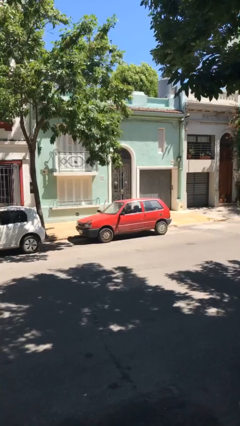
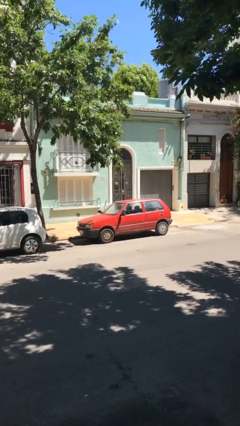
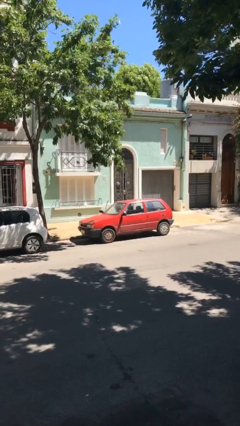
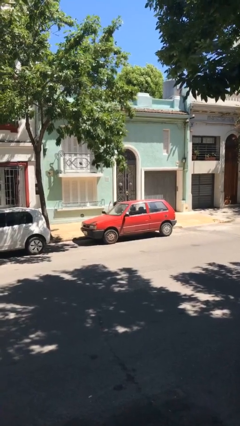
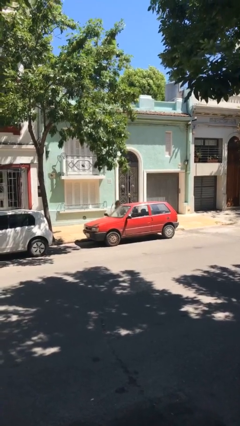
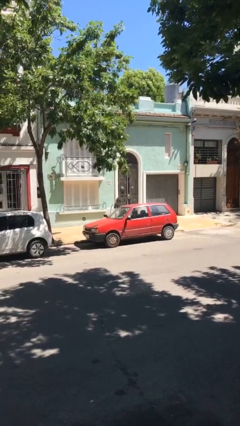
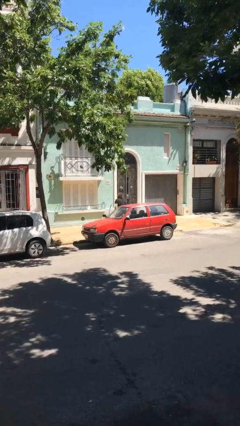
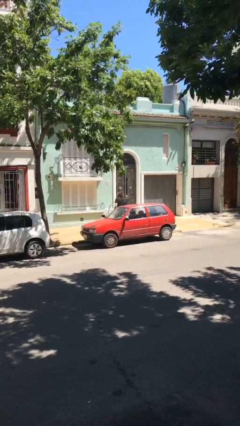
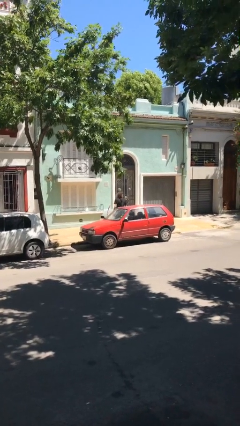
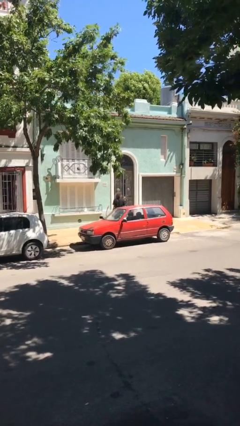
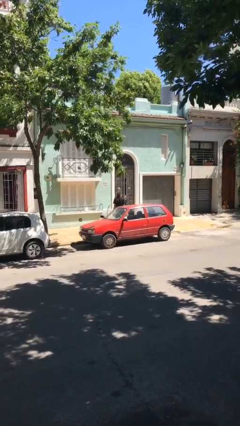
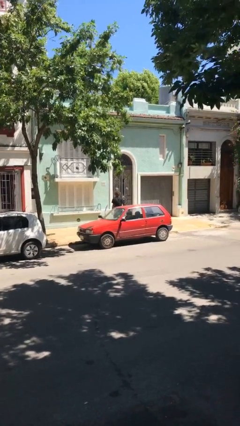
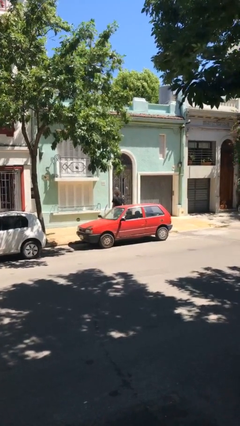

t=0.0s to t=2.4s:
person exits car

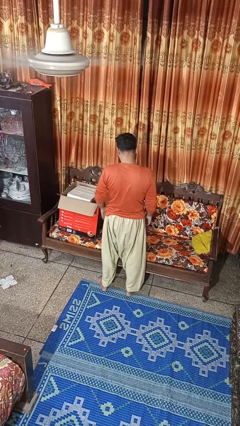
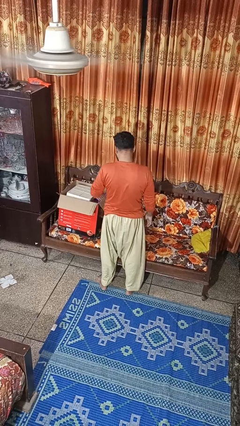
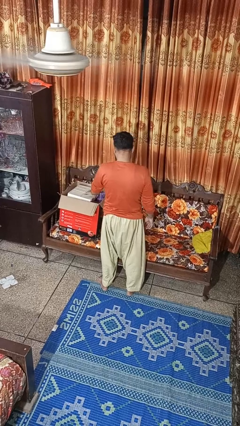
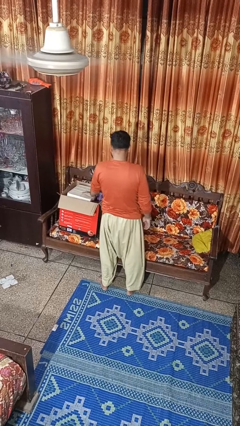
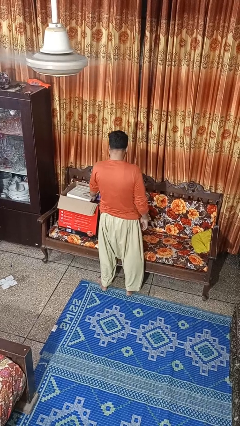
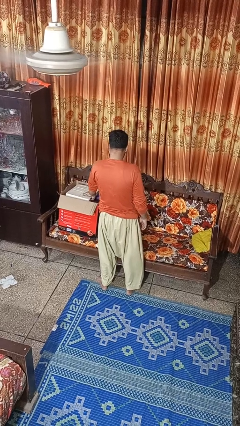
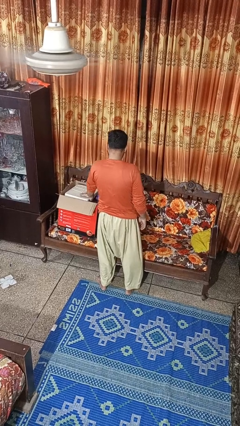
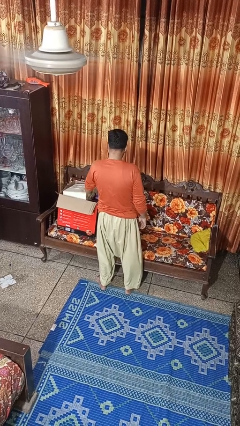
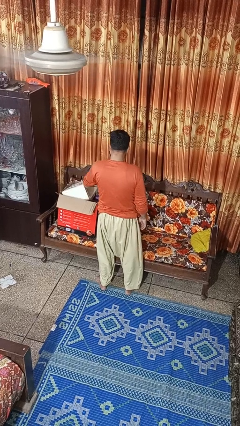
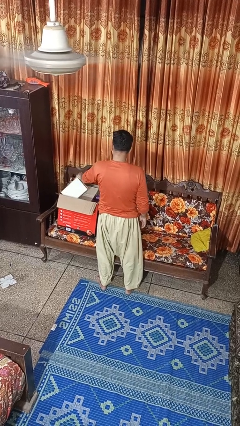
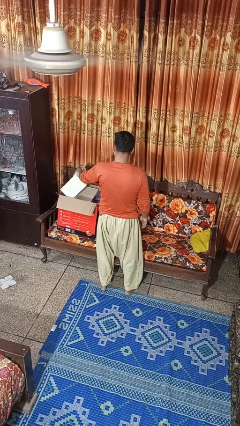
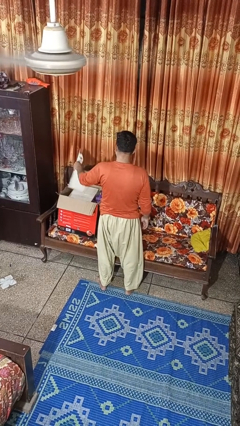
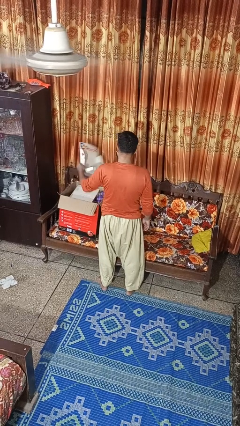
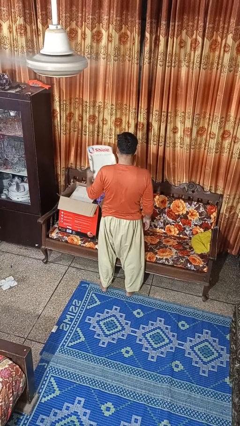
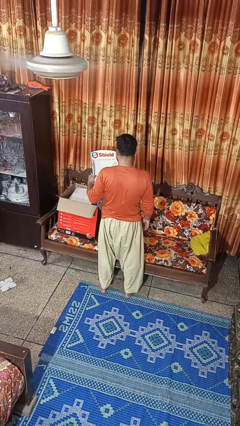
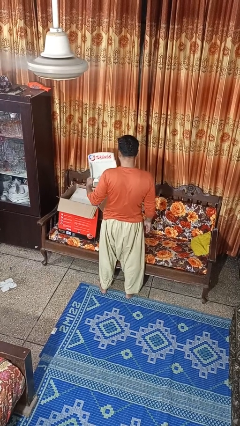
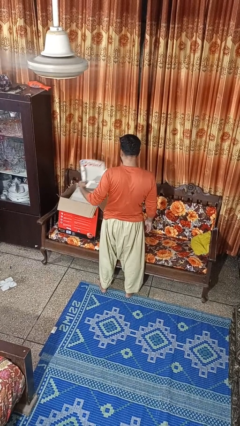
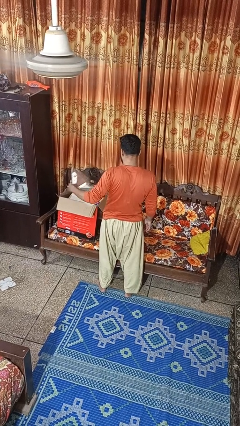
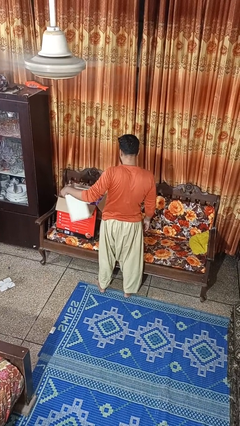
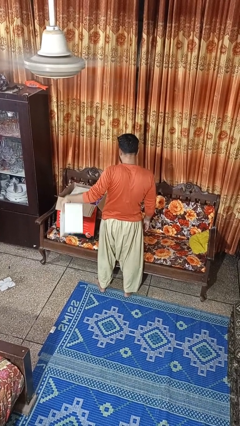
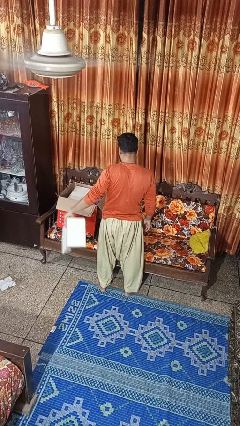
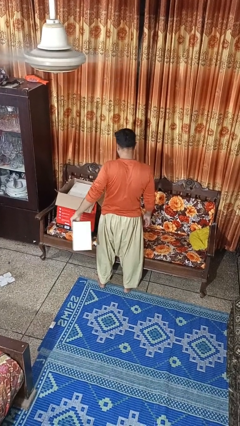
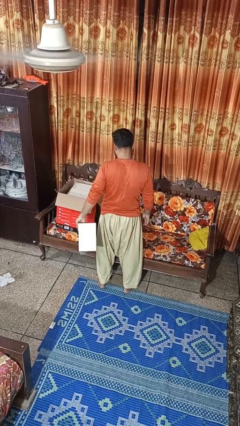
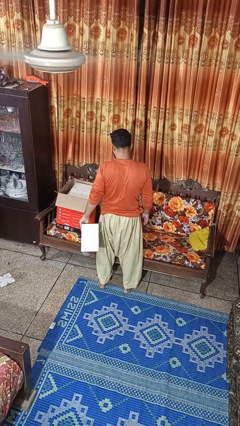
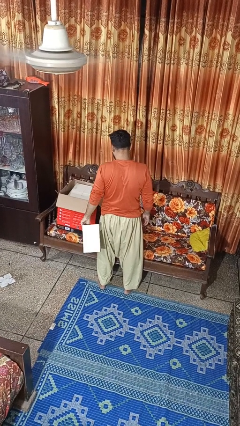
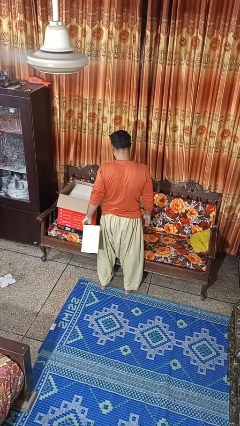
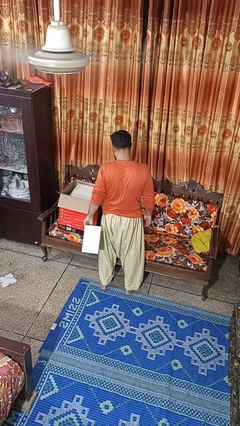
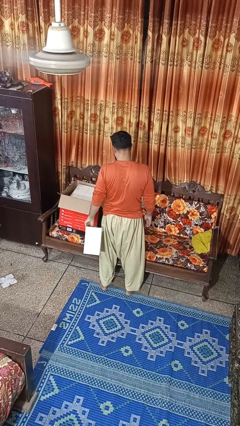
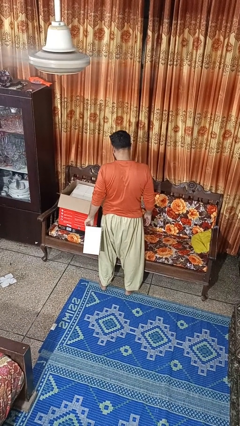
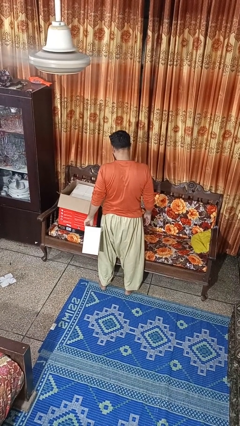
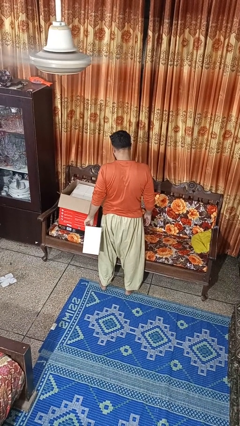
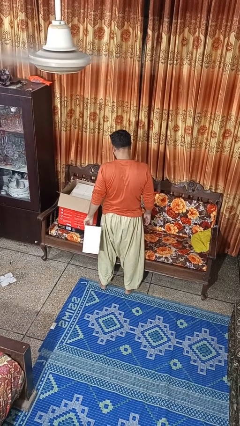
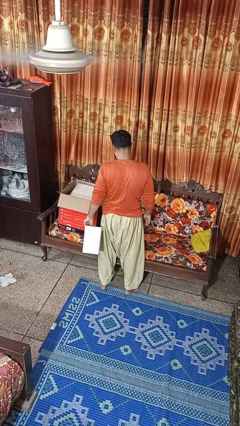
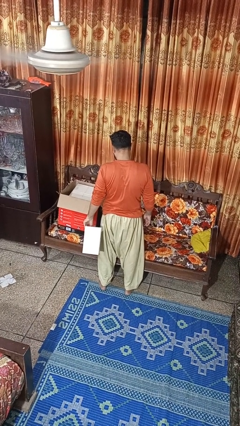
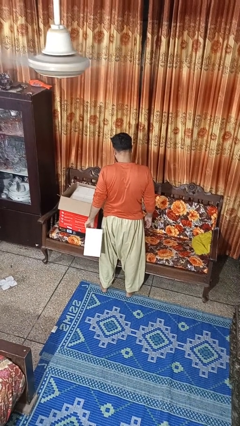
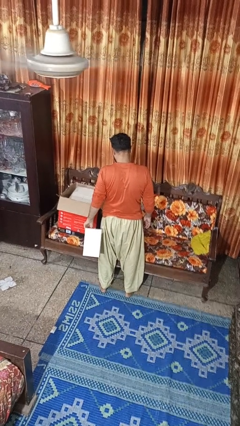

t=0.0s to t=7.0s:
person takes object from box

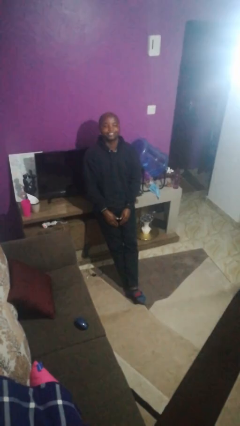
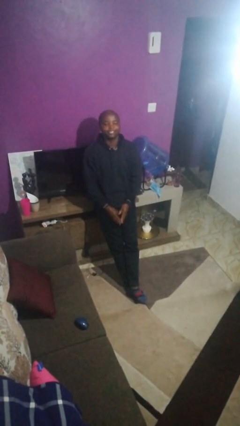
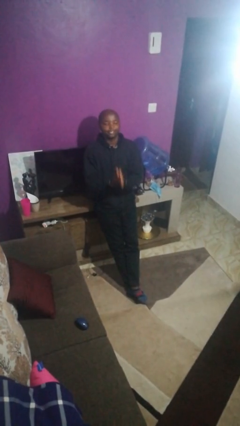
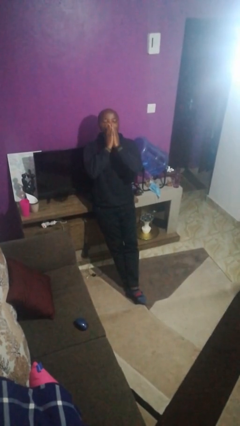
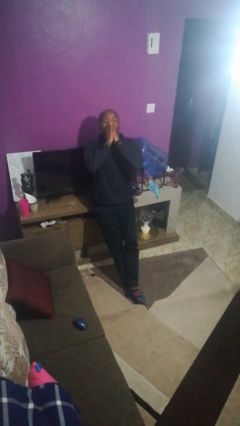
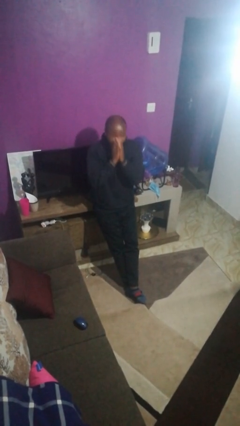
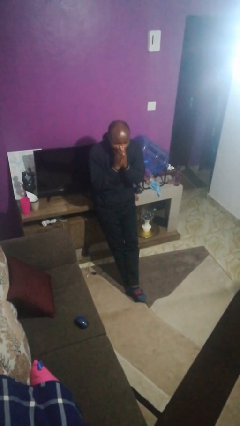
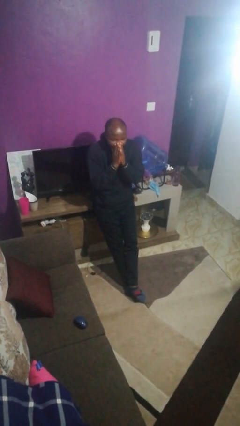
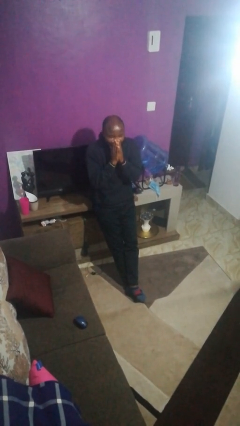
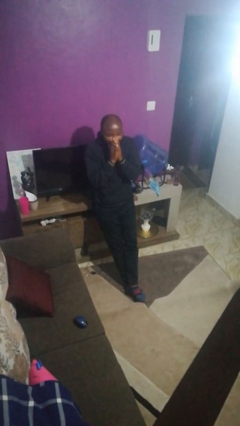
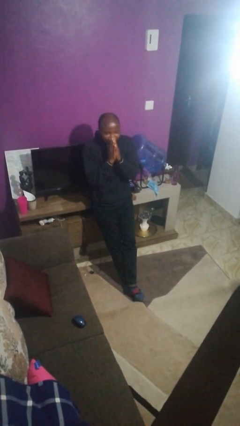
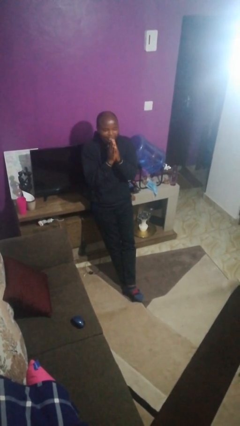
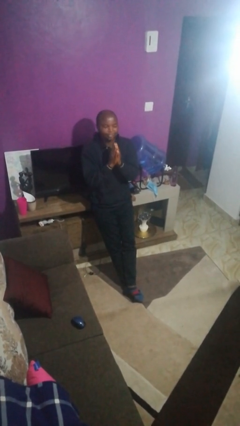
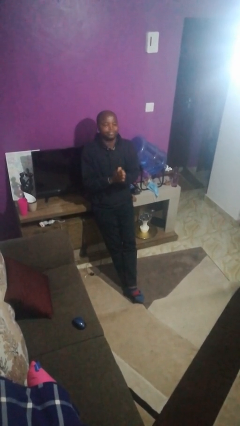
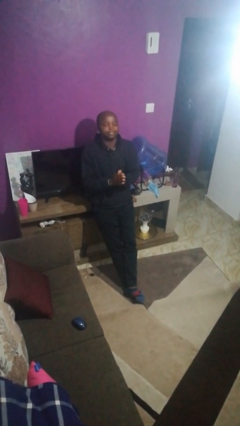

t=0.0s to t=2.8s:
person sneezes into hand

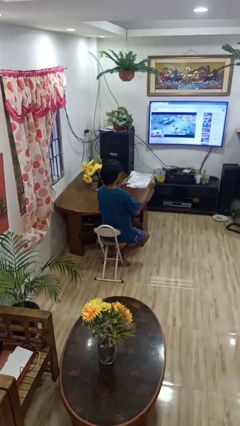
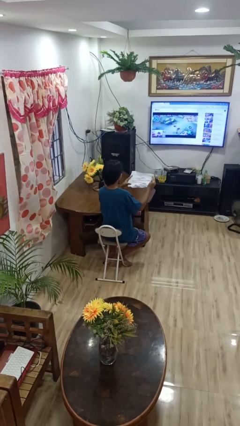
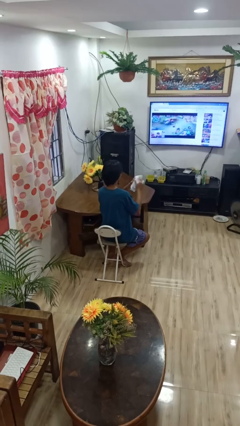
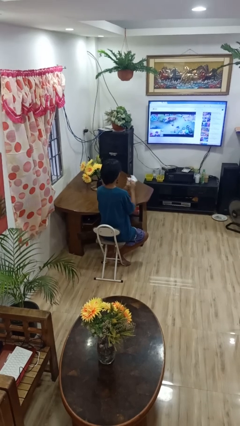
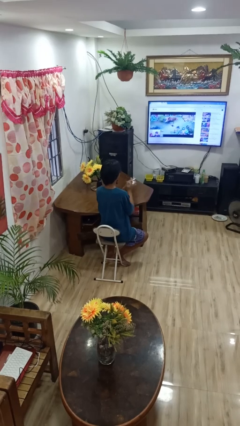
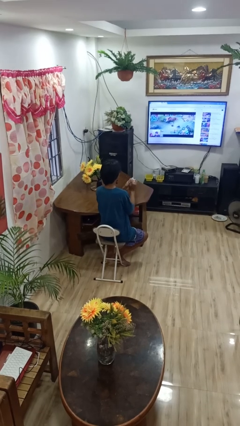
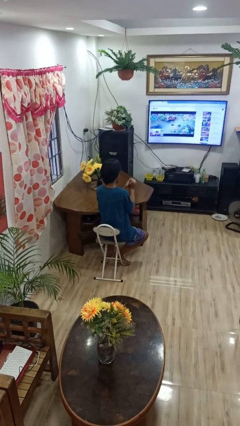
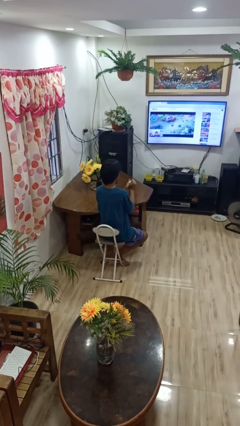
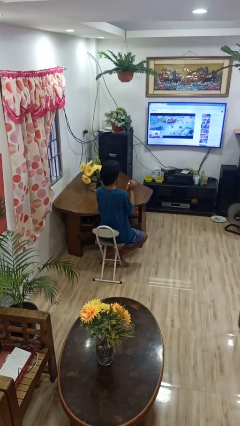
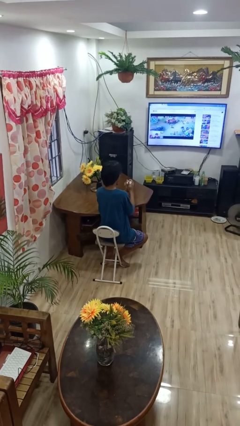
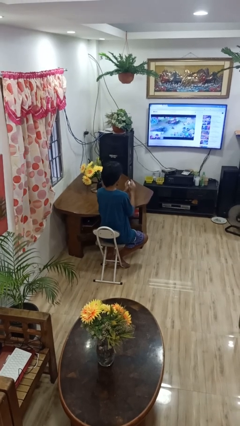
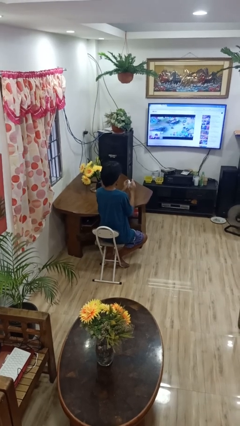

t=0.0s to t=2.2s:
person crumples paper

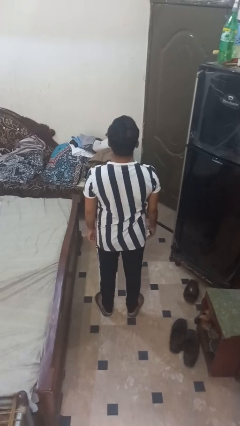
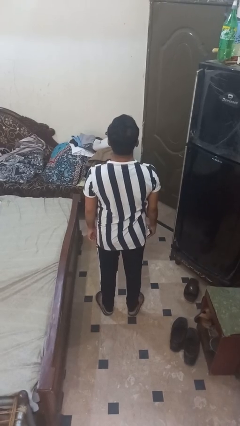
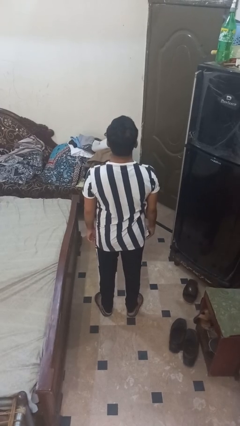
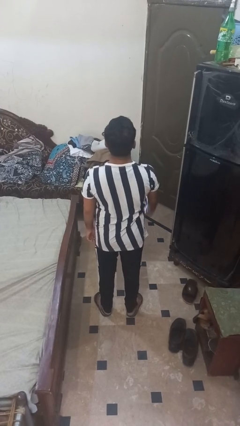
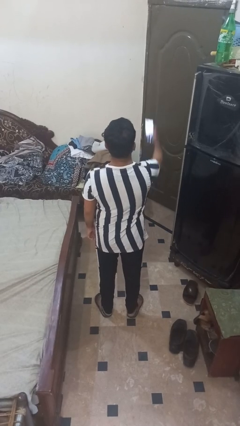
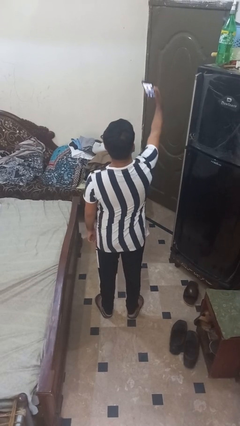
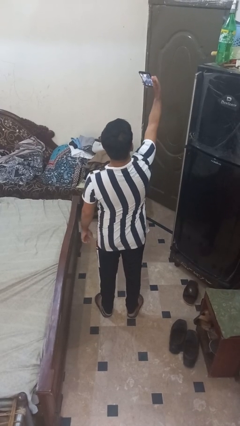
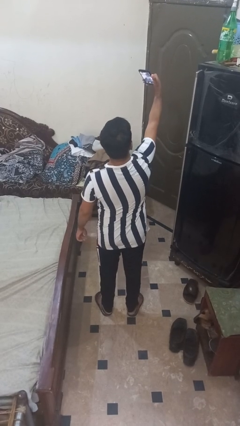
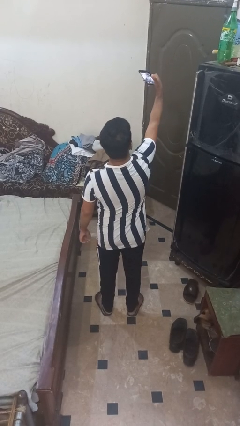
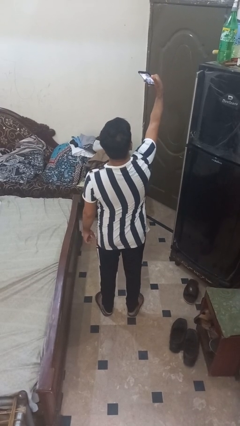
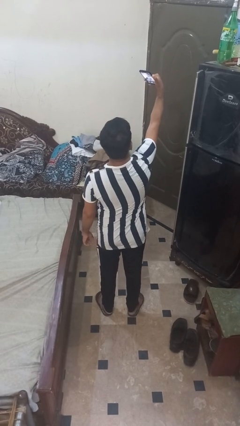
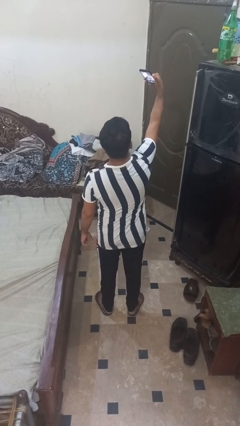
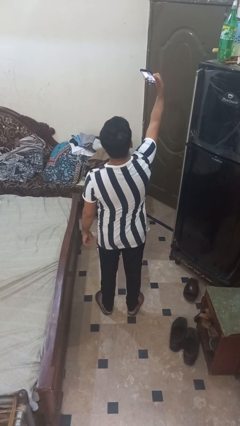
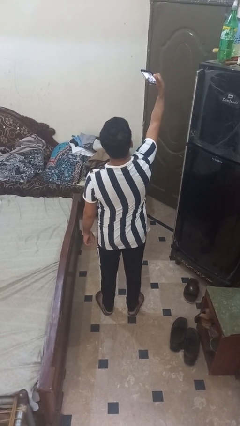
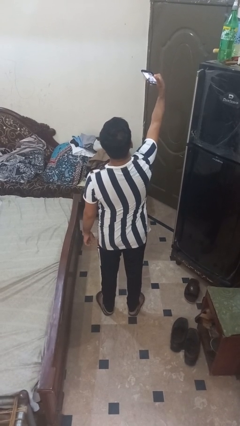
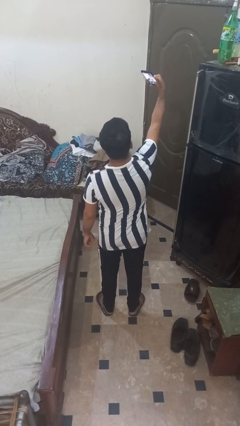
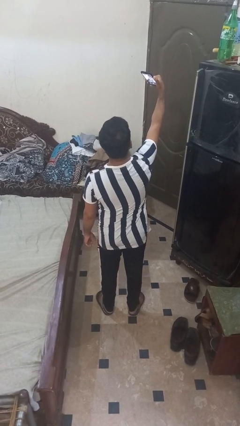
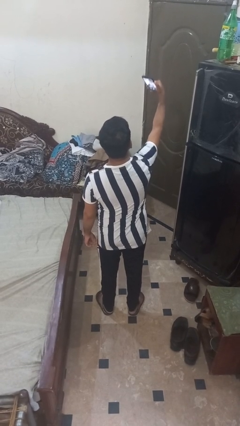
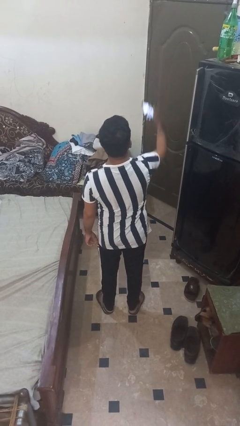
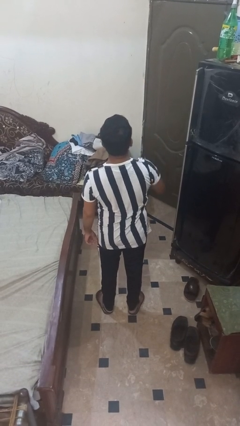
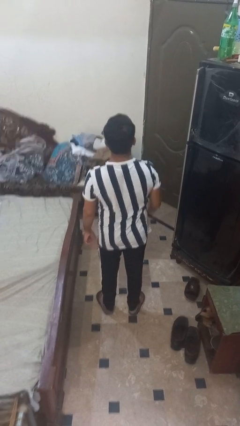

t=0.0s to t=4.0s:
person takes selfie
